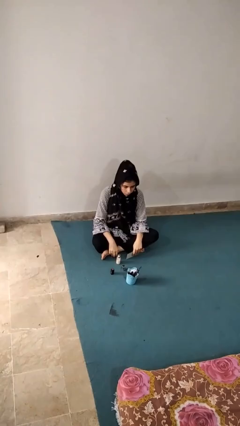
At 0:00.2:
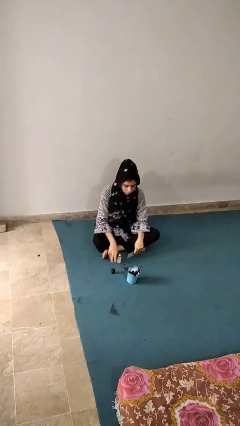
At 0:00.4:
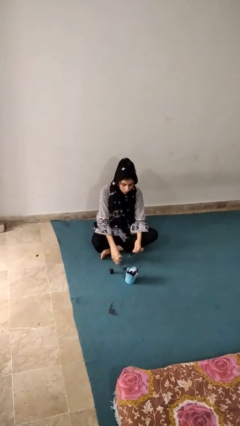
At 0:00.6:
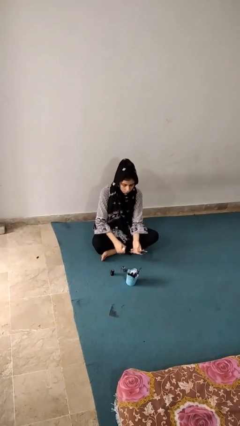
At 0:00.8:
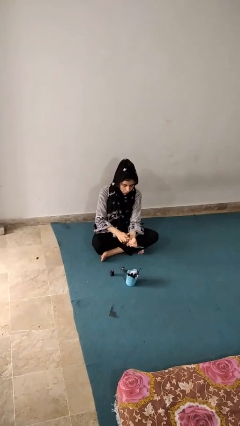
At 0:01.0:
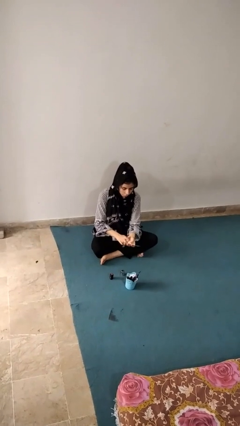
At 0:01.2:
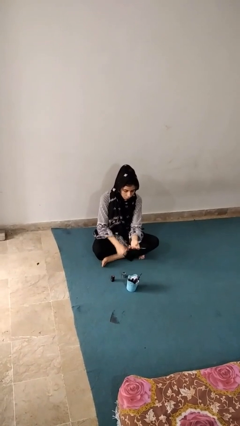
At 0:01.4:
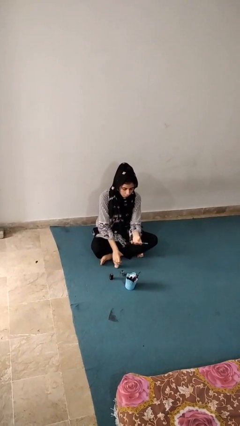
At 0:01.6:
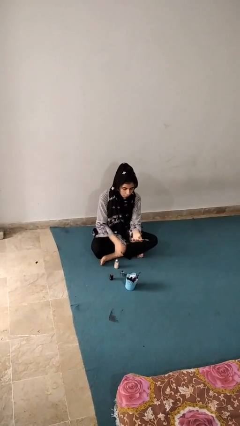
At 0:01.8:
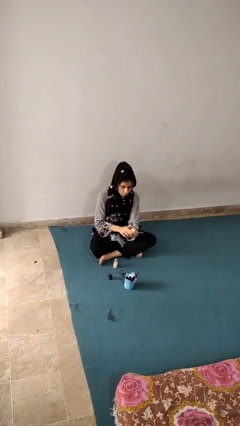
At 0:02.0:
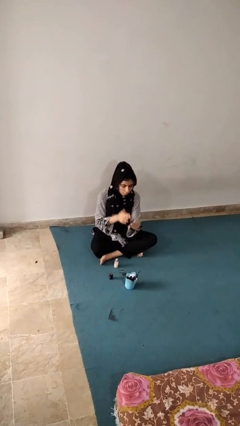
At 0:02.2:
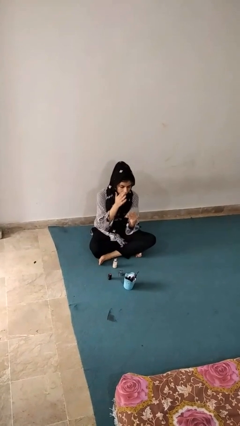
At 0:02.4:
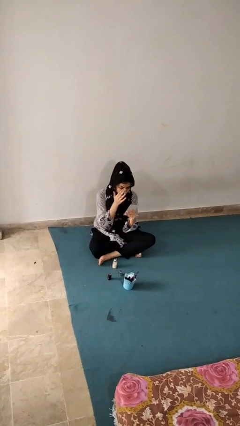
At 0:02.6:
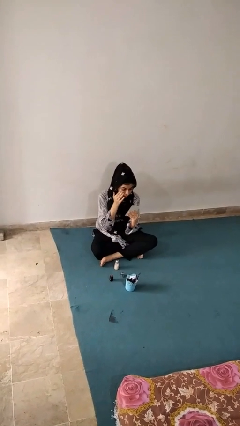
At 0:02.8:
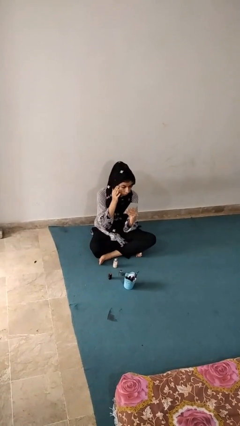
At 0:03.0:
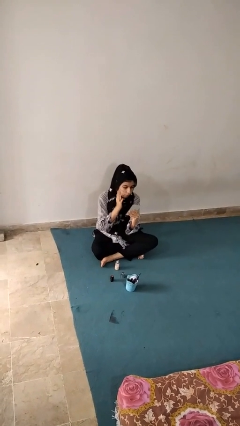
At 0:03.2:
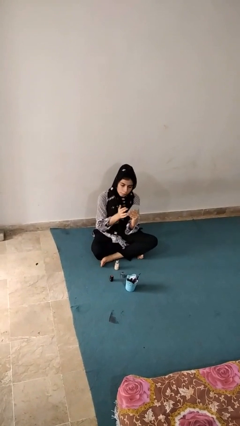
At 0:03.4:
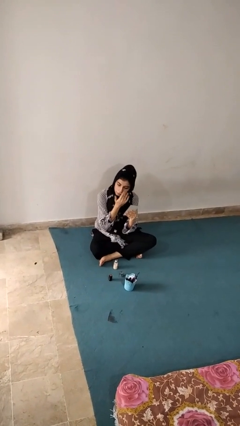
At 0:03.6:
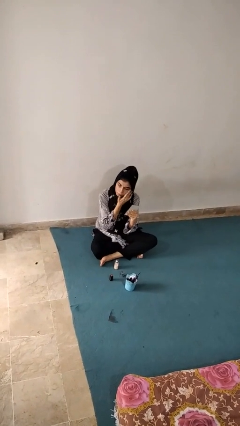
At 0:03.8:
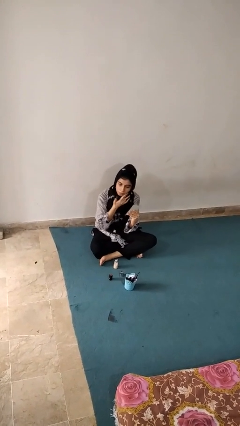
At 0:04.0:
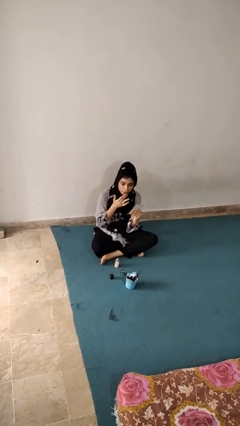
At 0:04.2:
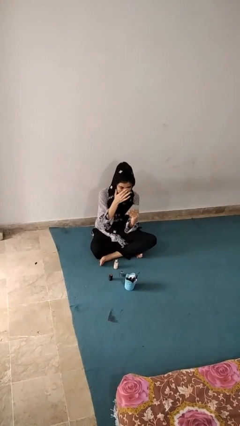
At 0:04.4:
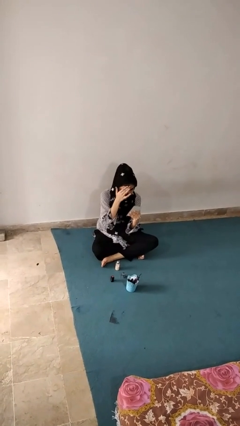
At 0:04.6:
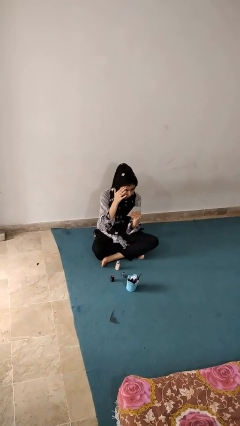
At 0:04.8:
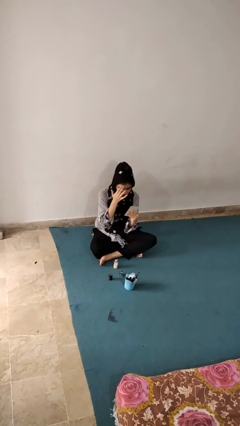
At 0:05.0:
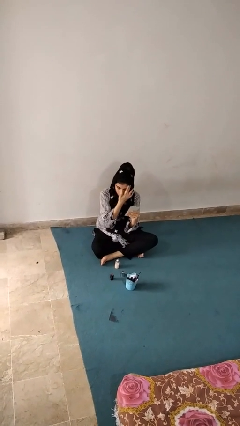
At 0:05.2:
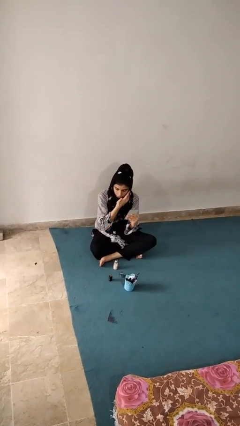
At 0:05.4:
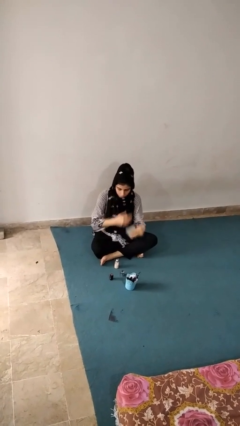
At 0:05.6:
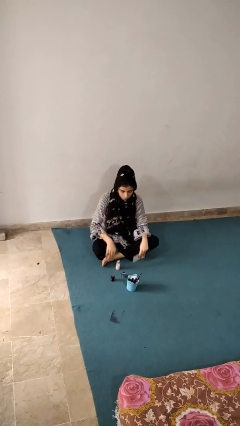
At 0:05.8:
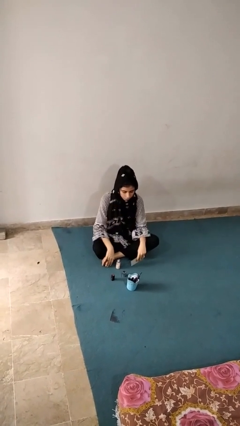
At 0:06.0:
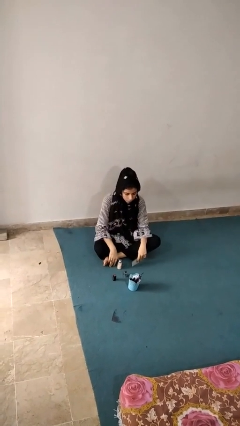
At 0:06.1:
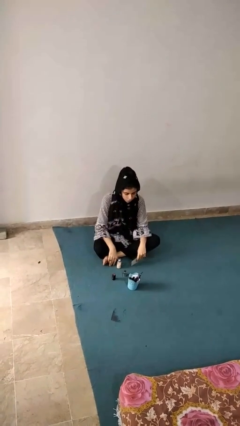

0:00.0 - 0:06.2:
person applies foundation makeup

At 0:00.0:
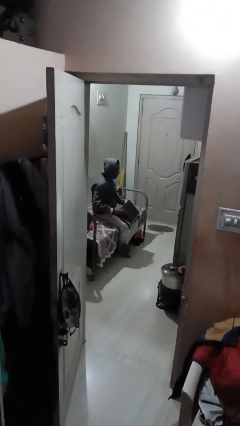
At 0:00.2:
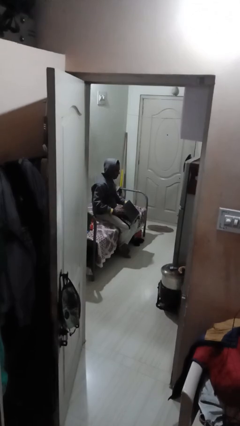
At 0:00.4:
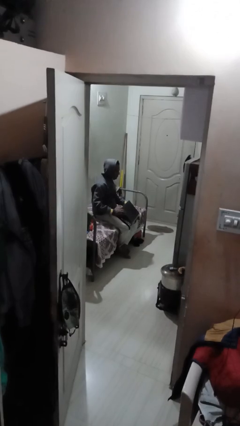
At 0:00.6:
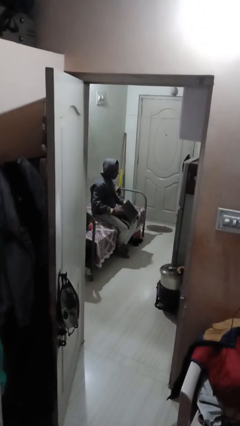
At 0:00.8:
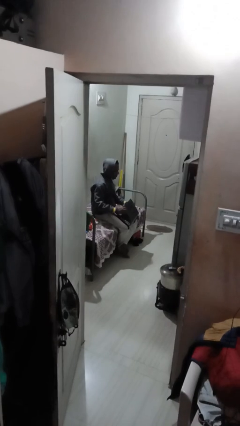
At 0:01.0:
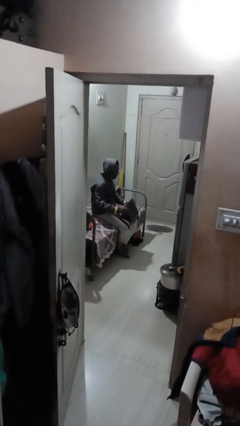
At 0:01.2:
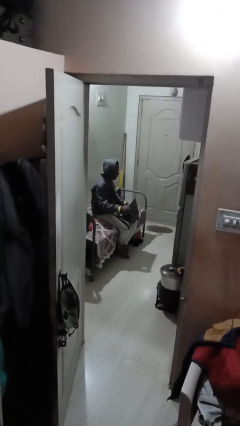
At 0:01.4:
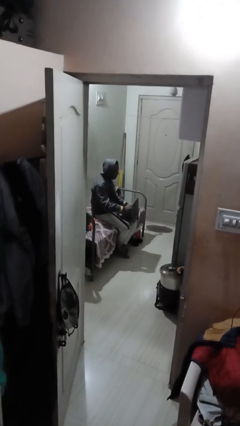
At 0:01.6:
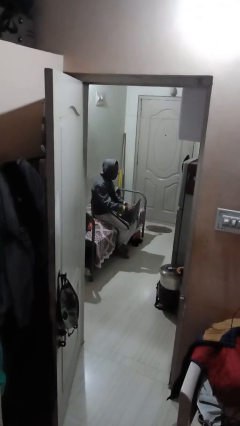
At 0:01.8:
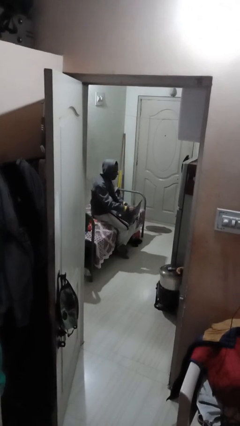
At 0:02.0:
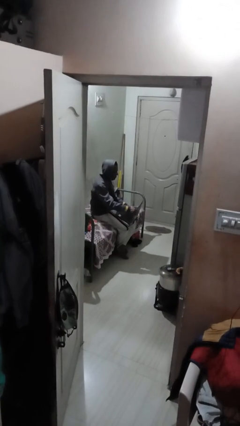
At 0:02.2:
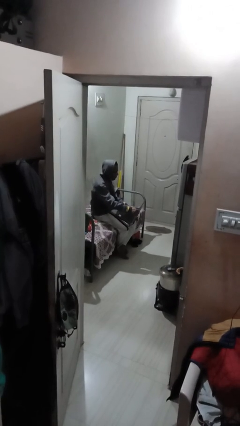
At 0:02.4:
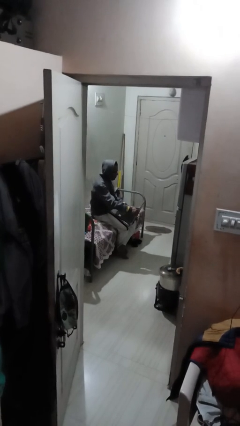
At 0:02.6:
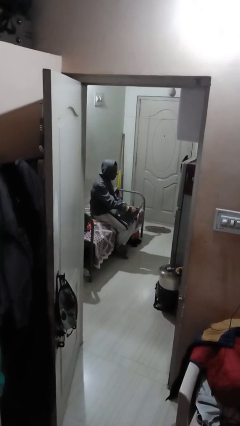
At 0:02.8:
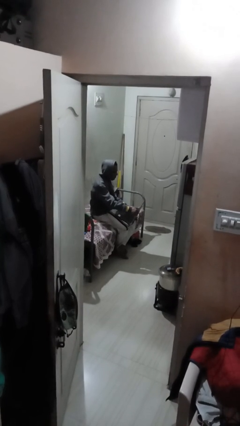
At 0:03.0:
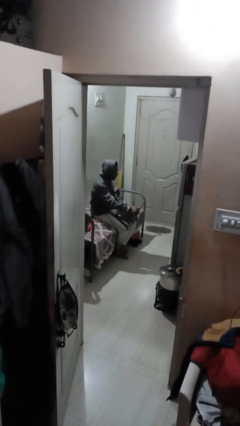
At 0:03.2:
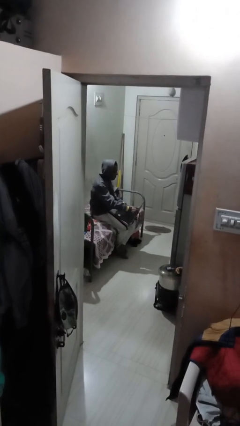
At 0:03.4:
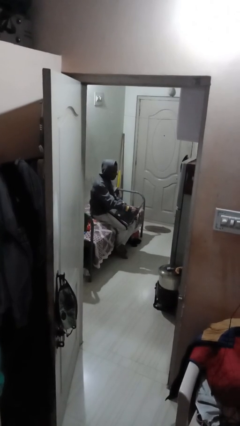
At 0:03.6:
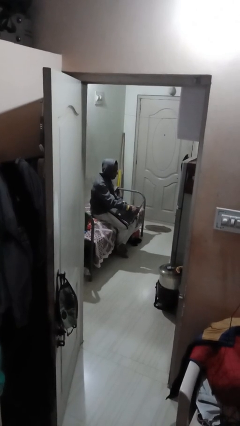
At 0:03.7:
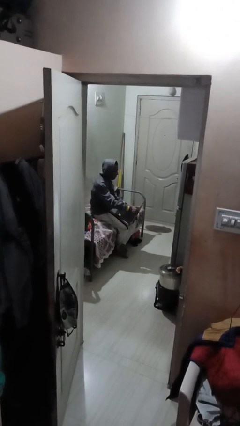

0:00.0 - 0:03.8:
person interacts with laptop

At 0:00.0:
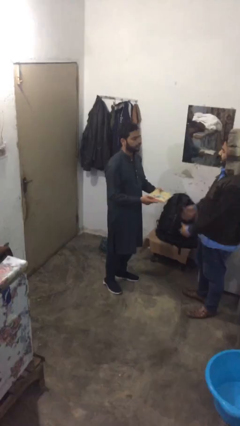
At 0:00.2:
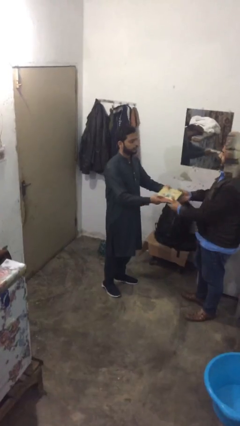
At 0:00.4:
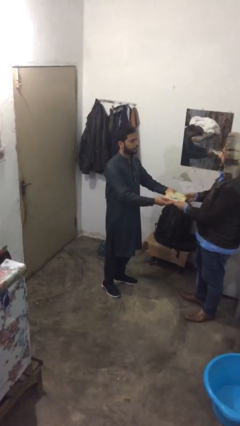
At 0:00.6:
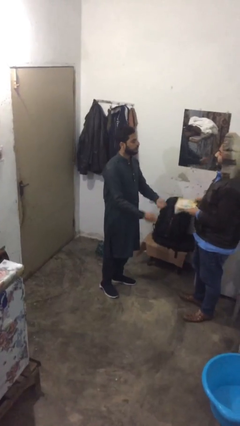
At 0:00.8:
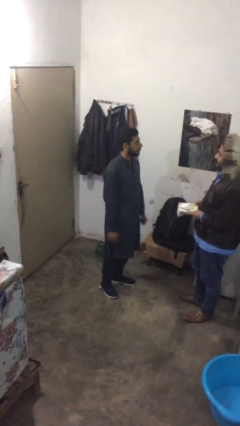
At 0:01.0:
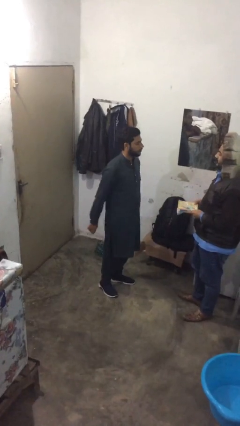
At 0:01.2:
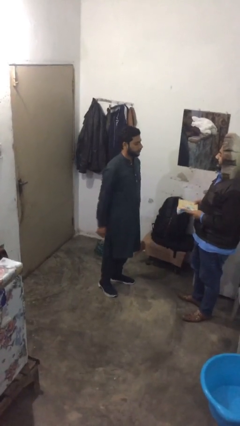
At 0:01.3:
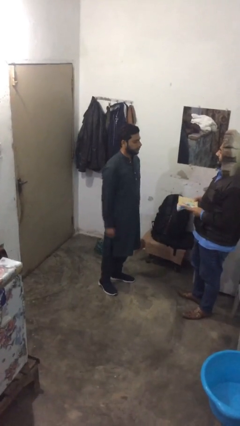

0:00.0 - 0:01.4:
person transfers object to person

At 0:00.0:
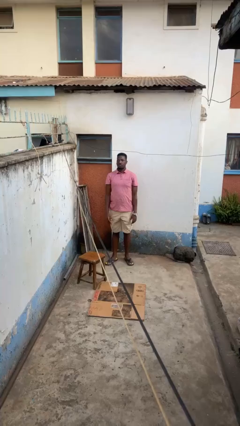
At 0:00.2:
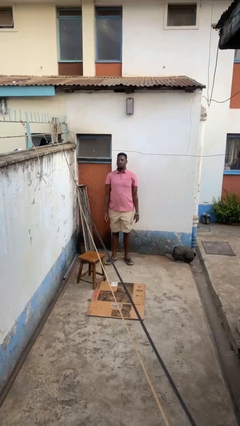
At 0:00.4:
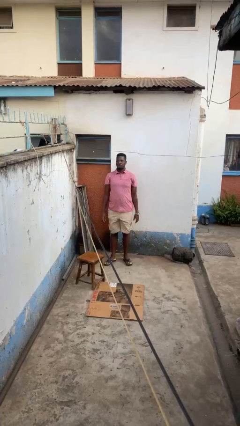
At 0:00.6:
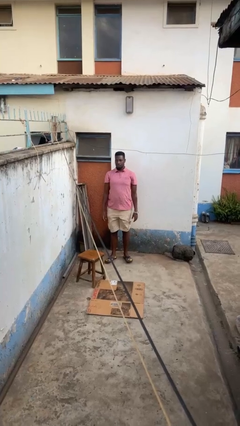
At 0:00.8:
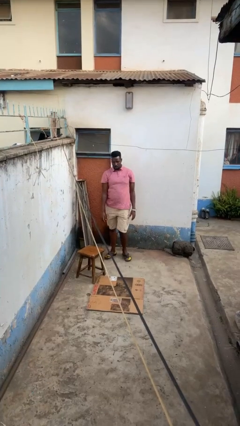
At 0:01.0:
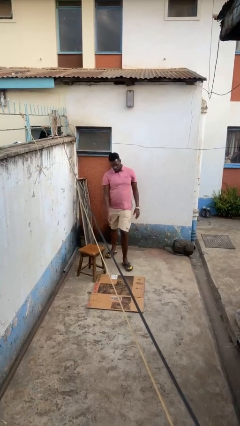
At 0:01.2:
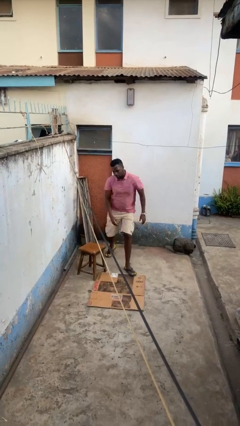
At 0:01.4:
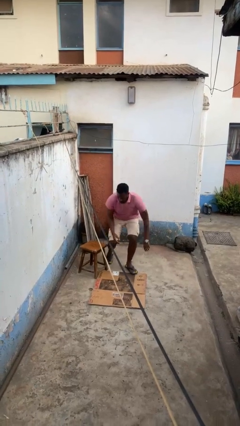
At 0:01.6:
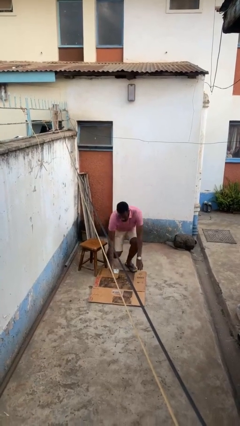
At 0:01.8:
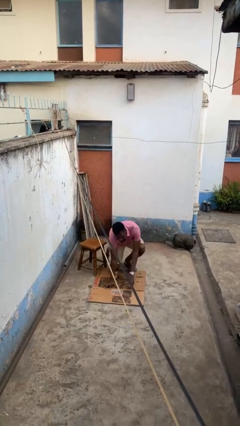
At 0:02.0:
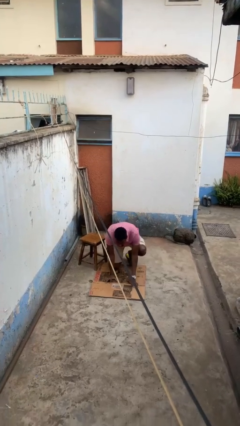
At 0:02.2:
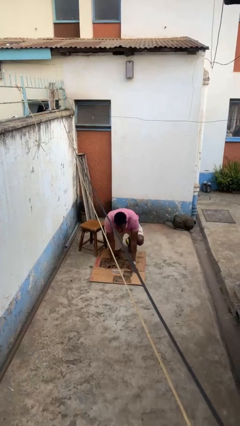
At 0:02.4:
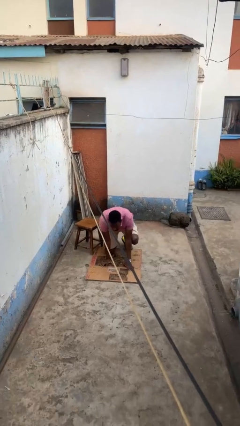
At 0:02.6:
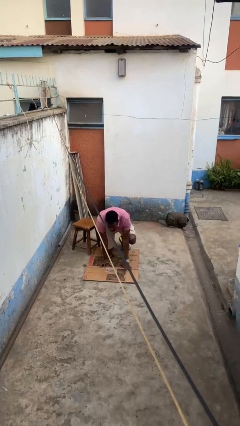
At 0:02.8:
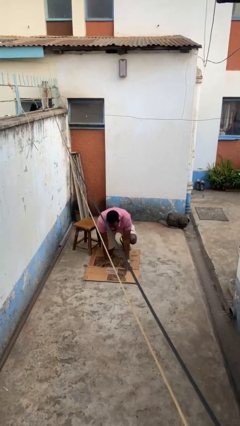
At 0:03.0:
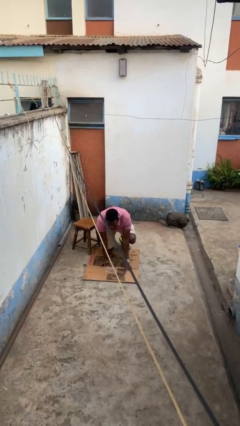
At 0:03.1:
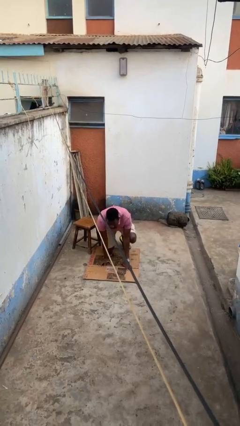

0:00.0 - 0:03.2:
person trips on object on floor

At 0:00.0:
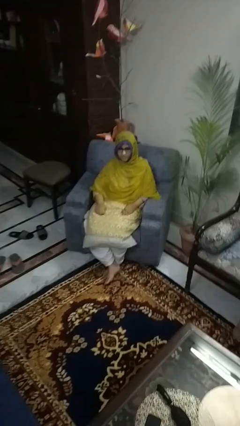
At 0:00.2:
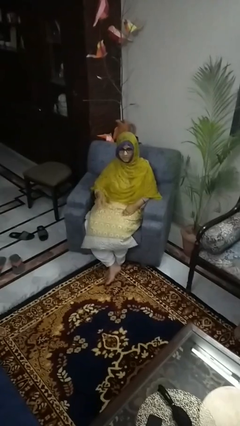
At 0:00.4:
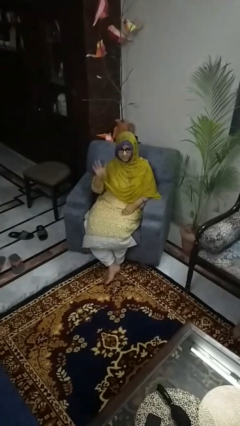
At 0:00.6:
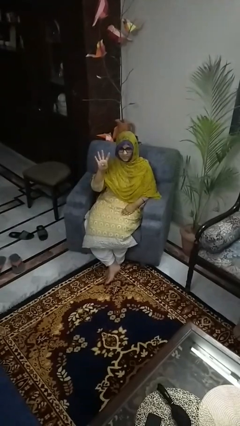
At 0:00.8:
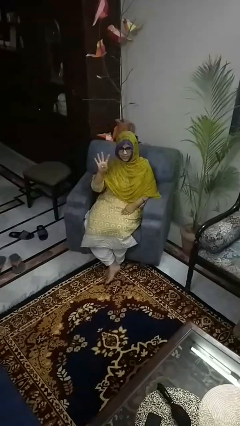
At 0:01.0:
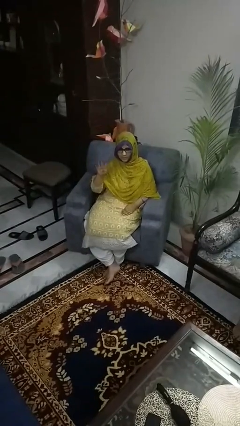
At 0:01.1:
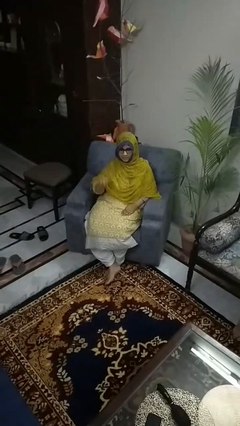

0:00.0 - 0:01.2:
person gestures number four

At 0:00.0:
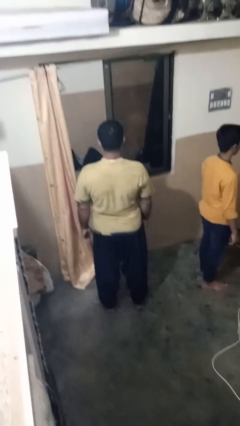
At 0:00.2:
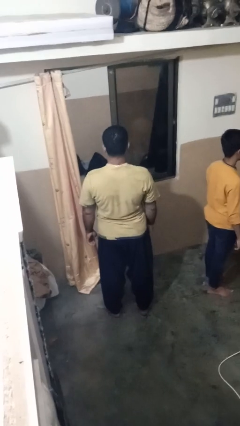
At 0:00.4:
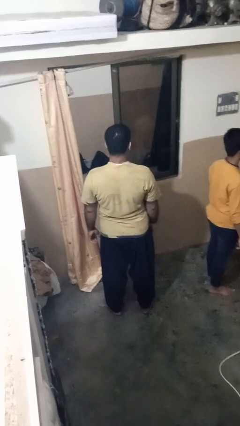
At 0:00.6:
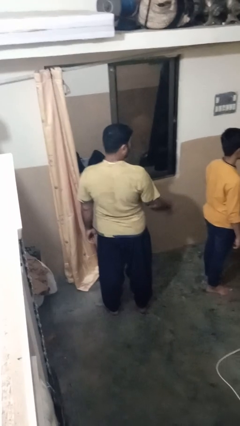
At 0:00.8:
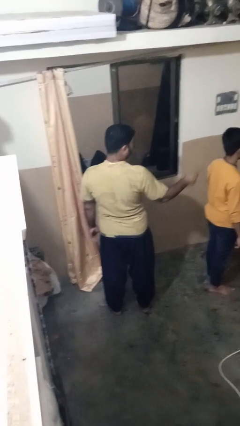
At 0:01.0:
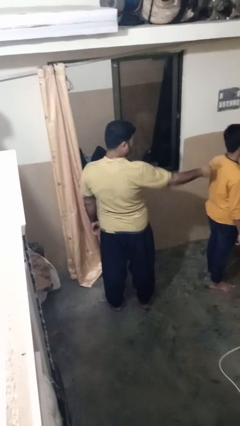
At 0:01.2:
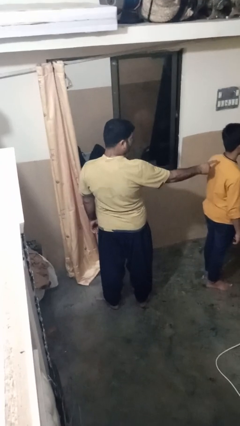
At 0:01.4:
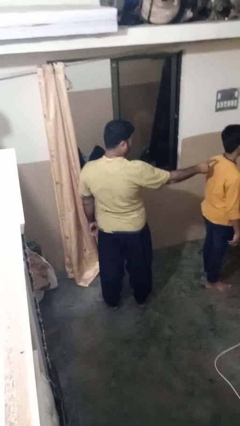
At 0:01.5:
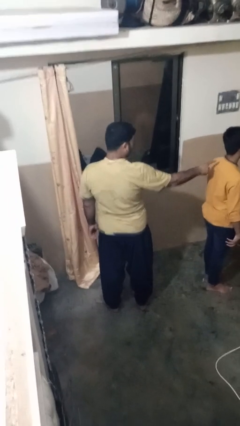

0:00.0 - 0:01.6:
person points at person
